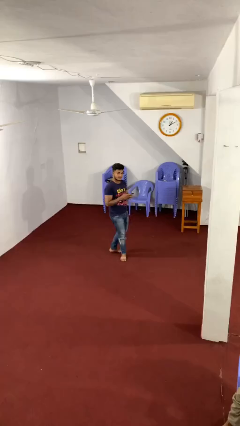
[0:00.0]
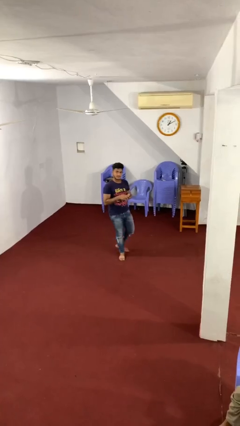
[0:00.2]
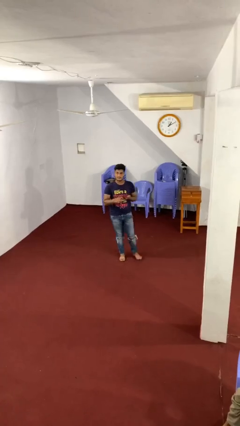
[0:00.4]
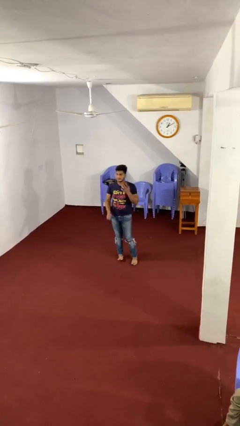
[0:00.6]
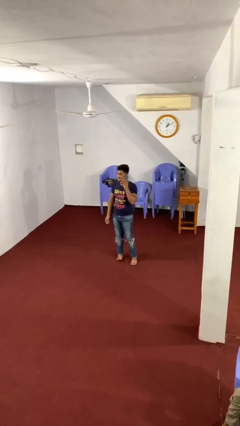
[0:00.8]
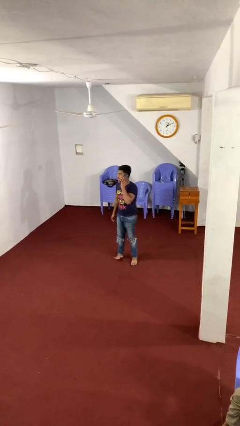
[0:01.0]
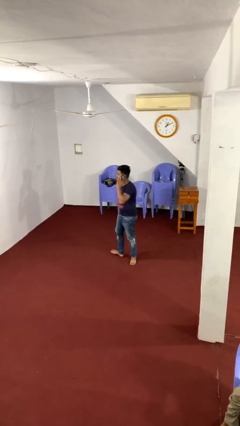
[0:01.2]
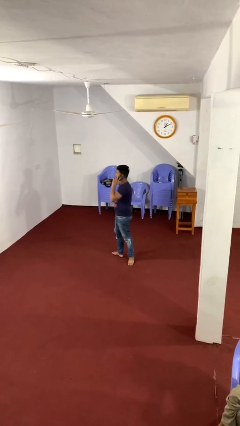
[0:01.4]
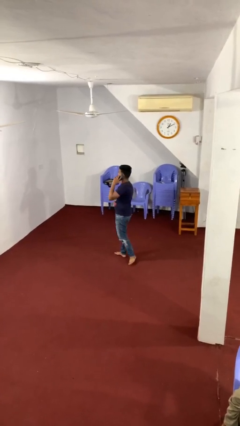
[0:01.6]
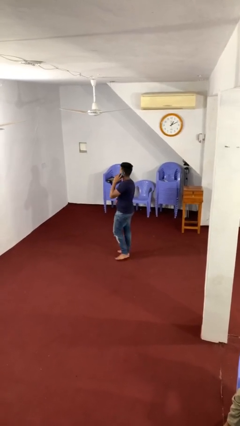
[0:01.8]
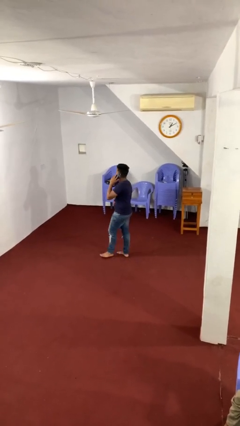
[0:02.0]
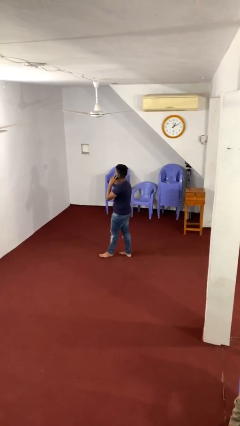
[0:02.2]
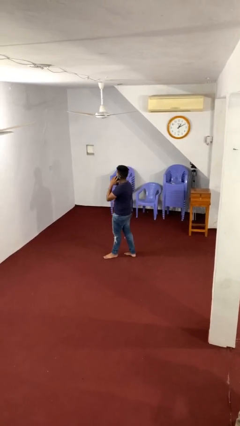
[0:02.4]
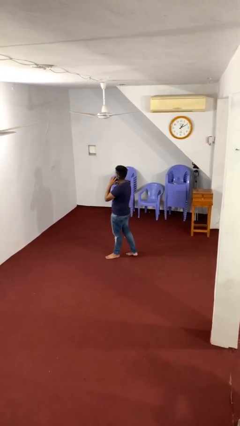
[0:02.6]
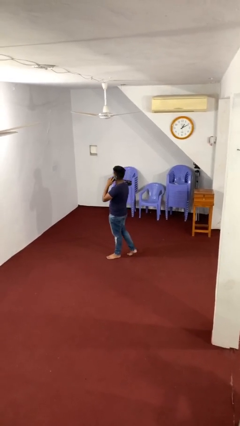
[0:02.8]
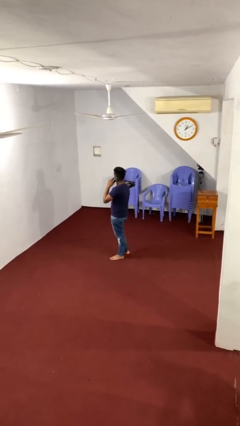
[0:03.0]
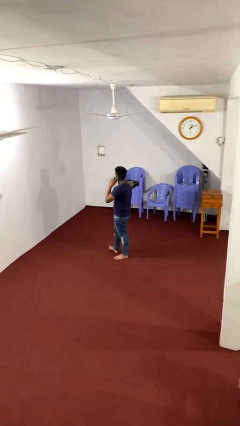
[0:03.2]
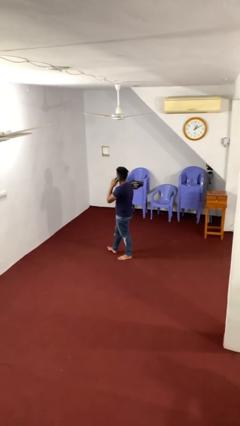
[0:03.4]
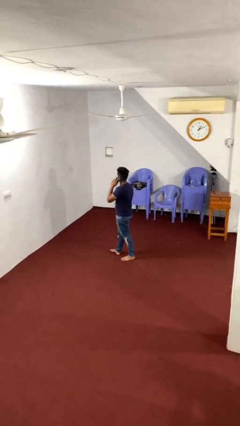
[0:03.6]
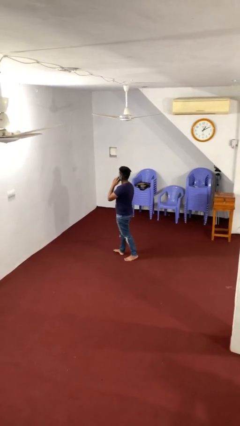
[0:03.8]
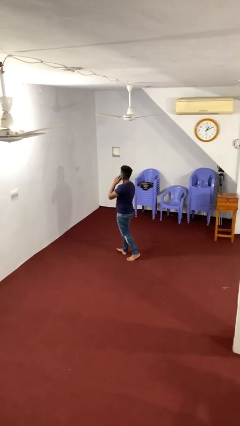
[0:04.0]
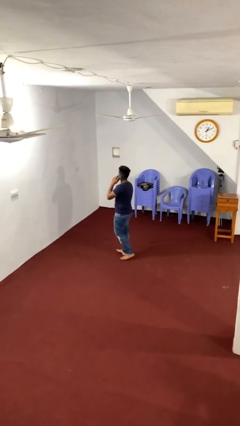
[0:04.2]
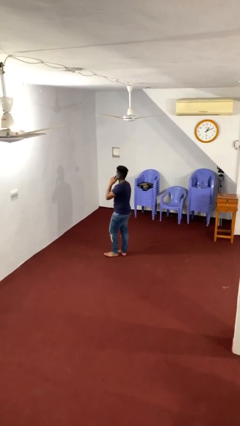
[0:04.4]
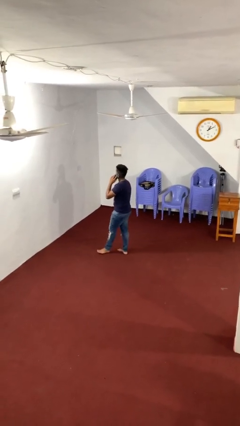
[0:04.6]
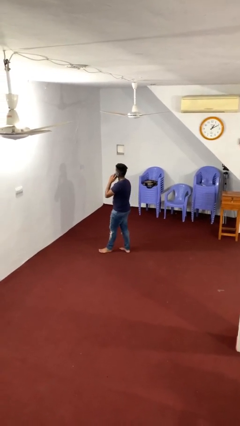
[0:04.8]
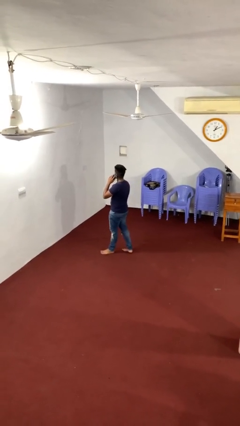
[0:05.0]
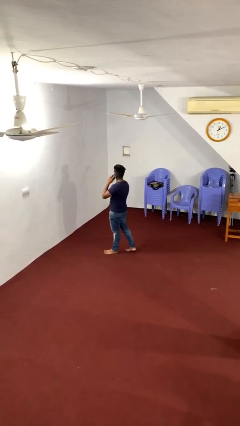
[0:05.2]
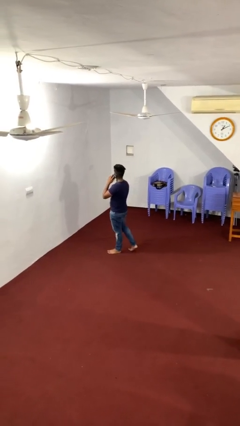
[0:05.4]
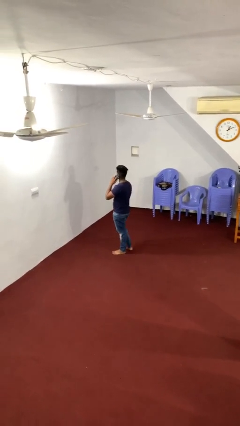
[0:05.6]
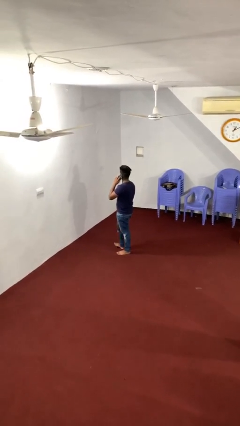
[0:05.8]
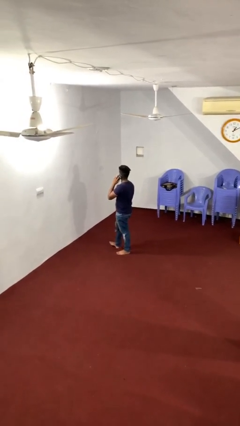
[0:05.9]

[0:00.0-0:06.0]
person talks on phone

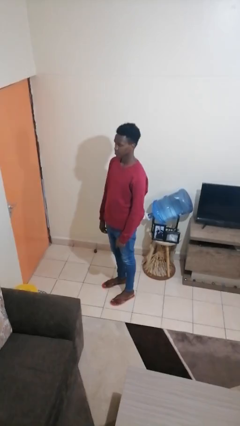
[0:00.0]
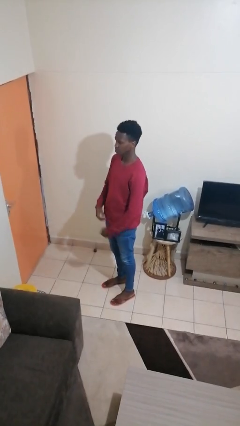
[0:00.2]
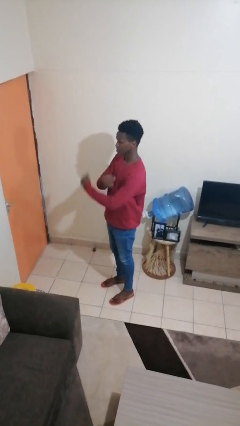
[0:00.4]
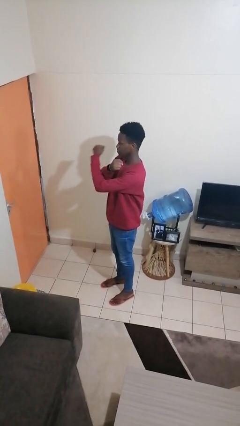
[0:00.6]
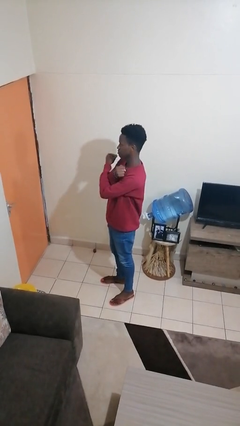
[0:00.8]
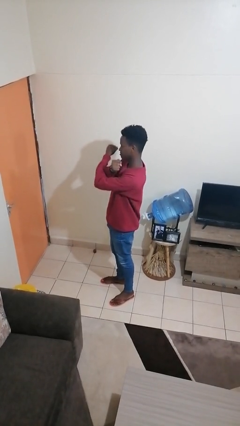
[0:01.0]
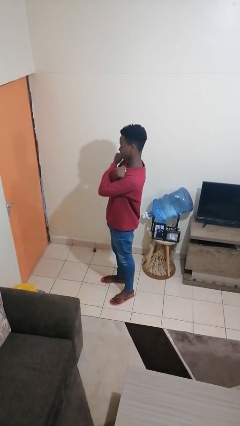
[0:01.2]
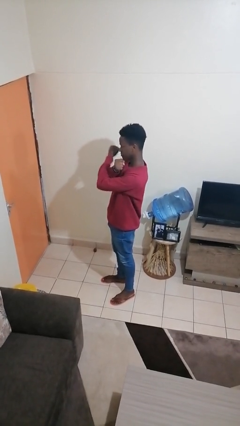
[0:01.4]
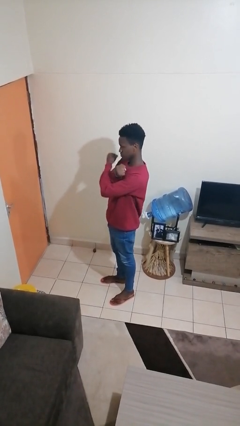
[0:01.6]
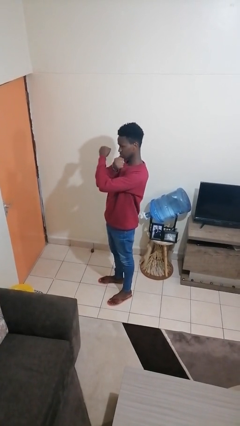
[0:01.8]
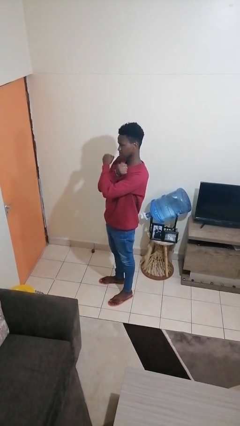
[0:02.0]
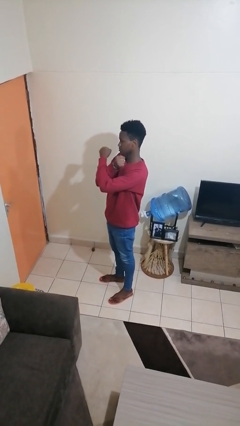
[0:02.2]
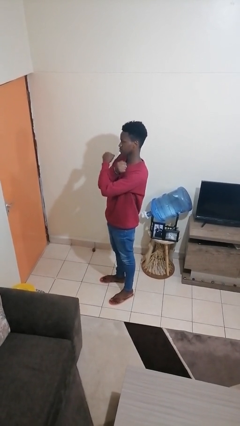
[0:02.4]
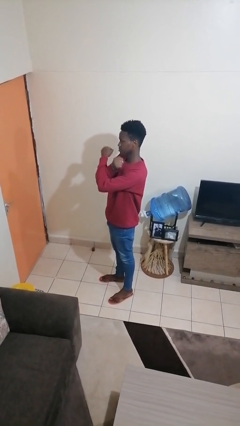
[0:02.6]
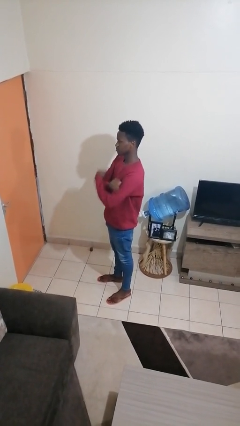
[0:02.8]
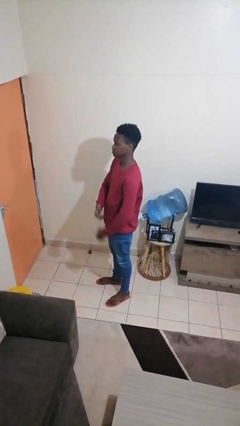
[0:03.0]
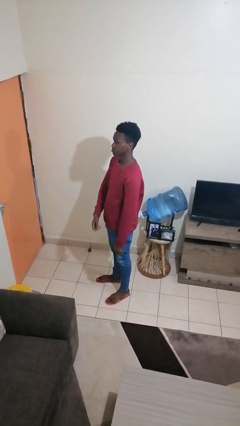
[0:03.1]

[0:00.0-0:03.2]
person gestures arms x

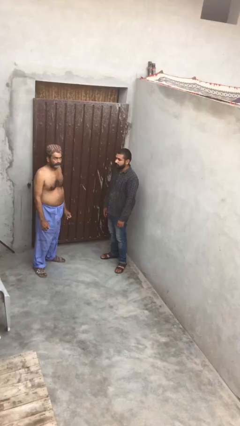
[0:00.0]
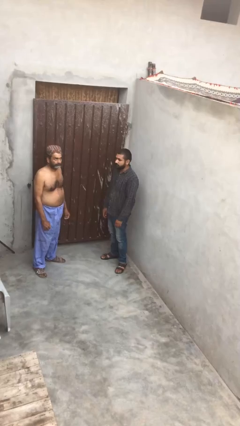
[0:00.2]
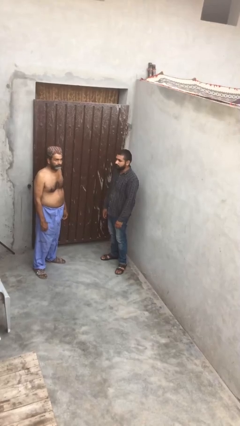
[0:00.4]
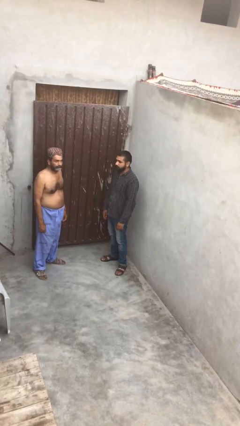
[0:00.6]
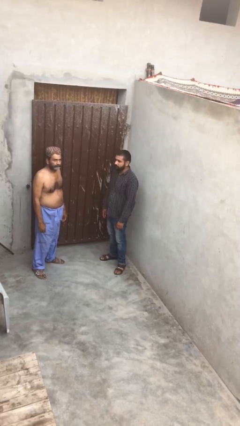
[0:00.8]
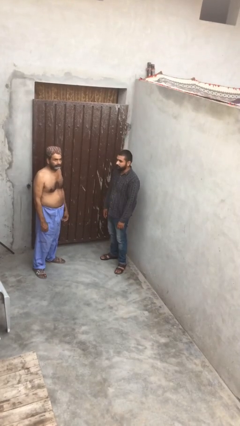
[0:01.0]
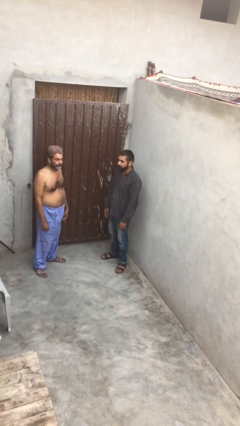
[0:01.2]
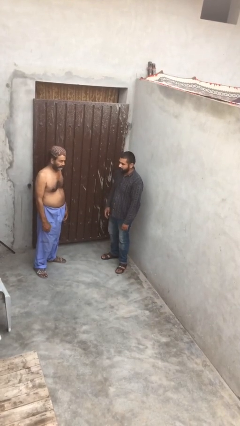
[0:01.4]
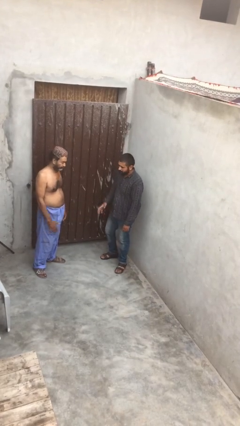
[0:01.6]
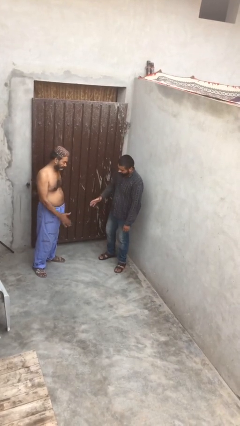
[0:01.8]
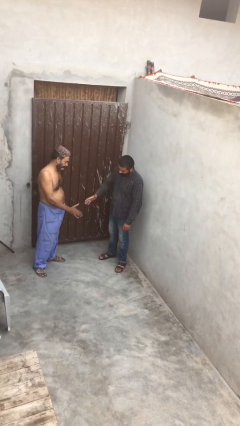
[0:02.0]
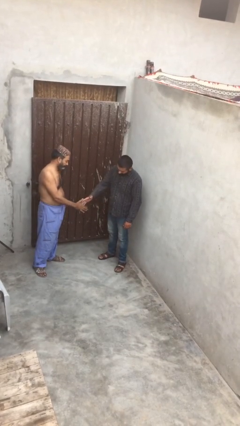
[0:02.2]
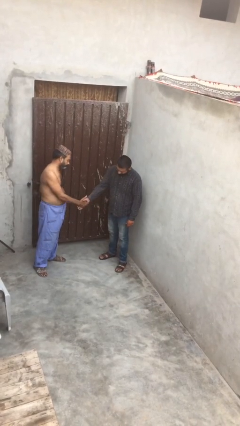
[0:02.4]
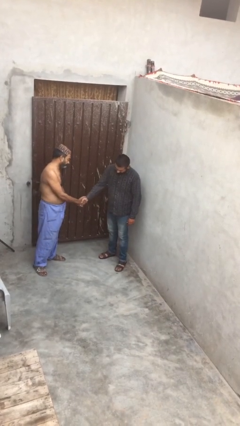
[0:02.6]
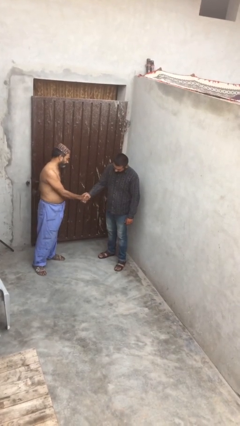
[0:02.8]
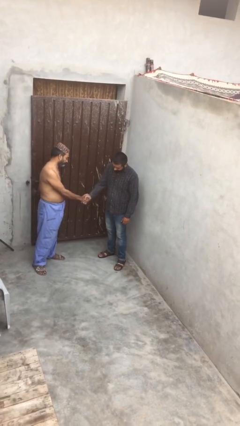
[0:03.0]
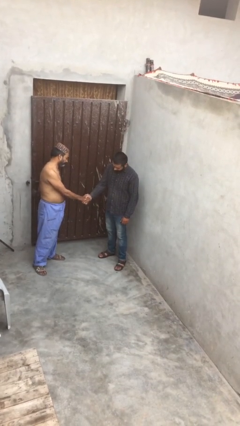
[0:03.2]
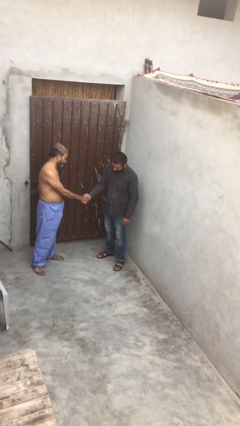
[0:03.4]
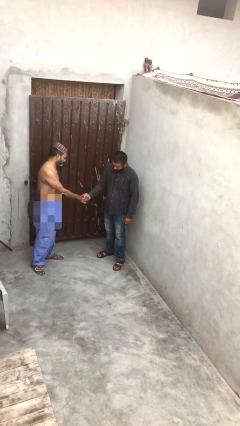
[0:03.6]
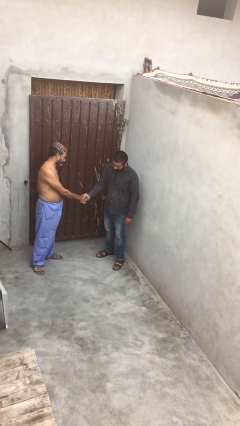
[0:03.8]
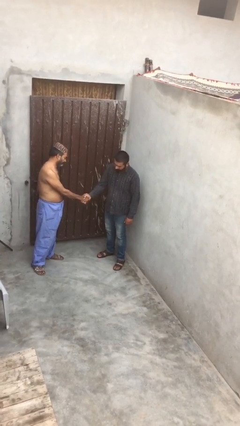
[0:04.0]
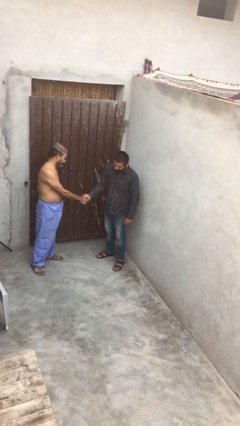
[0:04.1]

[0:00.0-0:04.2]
person shakes hand

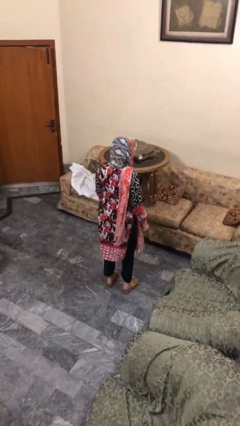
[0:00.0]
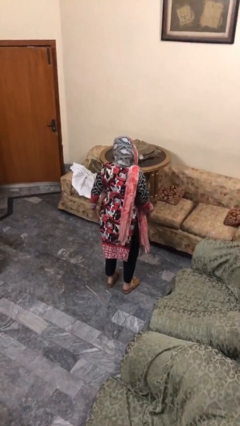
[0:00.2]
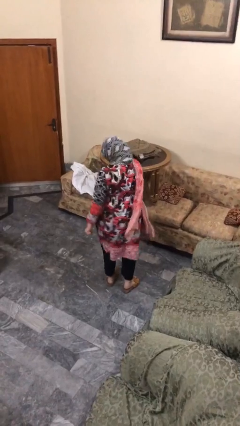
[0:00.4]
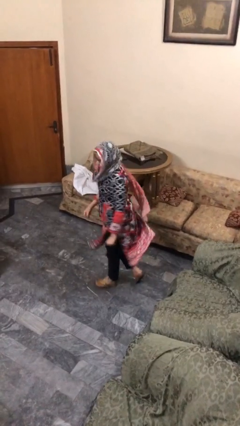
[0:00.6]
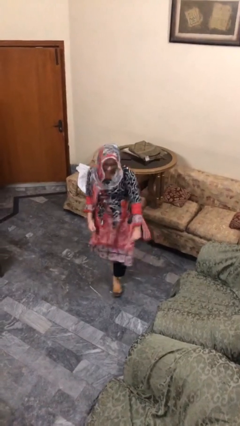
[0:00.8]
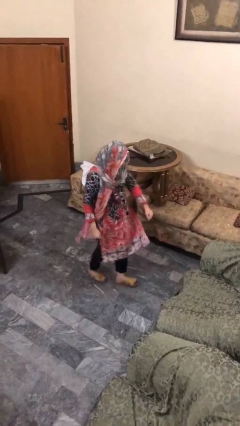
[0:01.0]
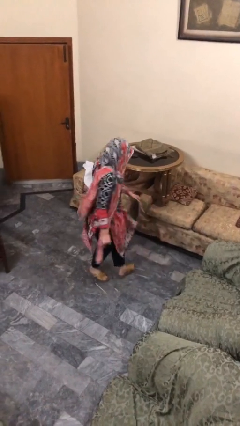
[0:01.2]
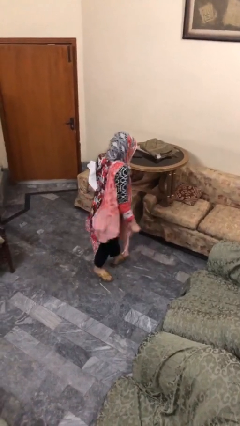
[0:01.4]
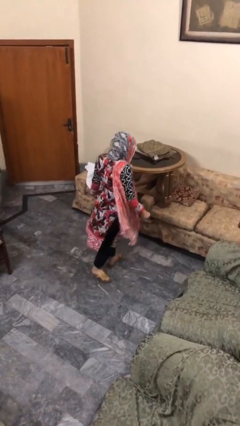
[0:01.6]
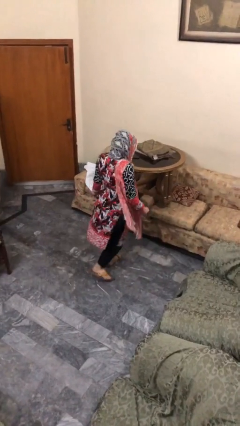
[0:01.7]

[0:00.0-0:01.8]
person twirls

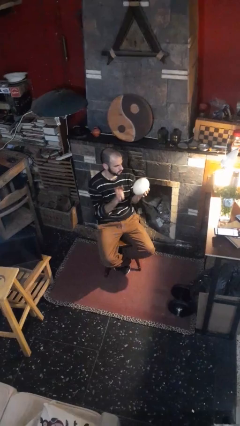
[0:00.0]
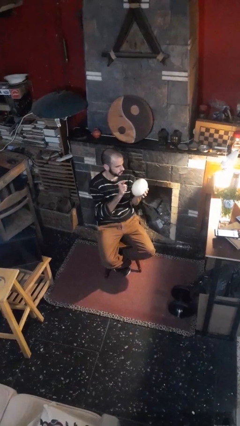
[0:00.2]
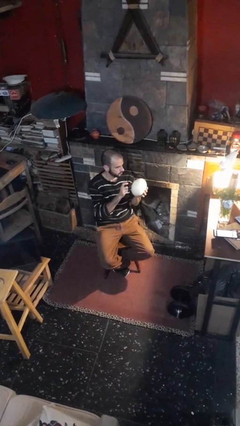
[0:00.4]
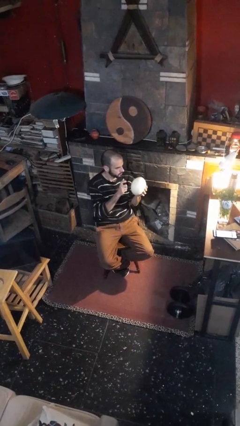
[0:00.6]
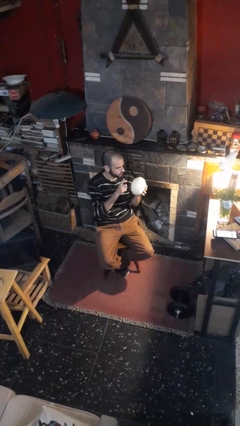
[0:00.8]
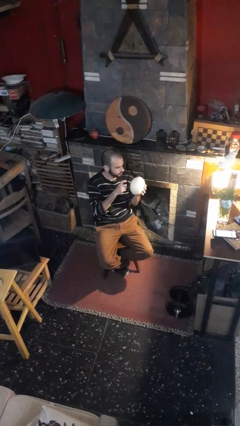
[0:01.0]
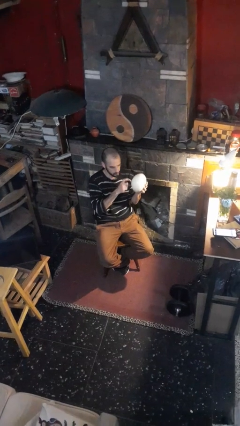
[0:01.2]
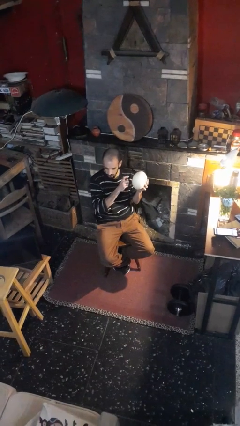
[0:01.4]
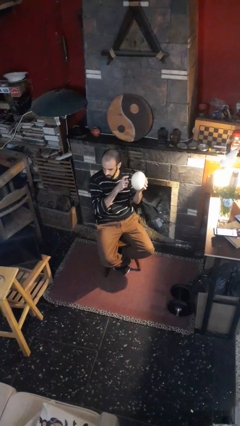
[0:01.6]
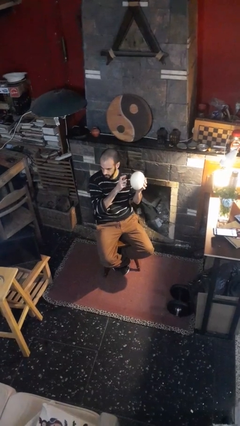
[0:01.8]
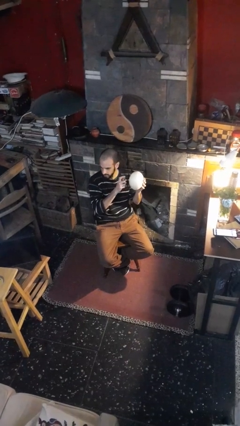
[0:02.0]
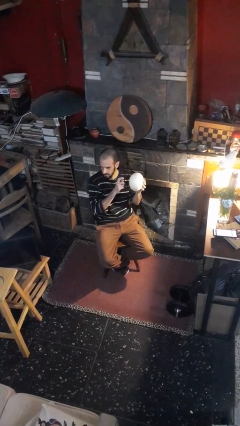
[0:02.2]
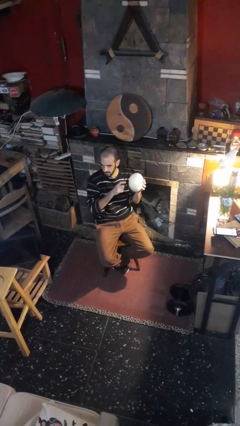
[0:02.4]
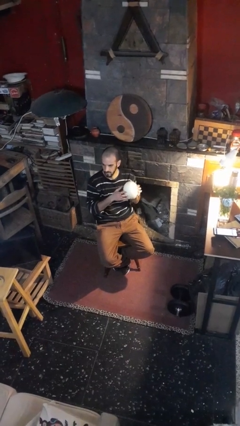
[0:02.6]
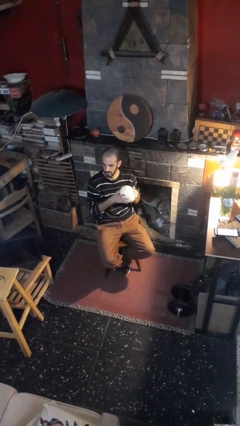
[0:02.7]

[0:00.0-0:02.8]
person taps object with finger
